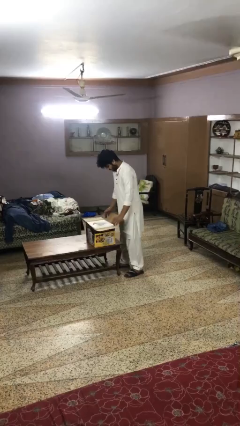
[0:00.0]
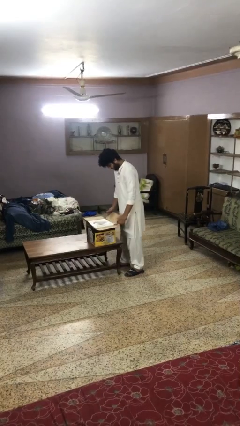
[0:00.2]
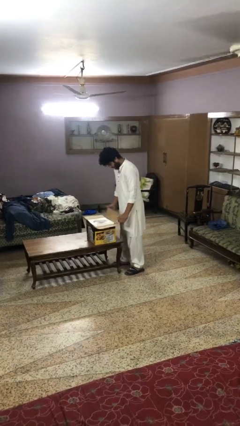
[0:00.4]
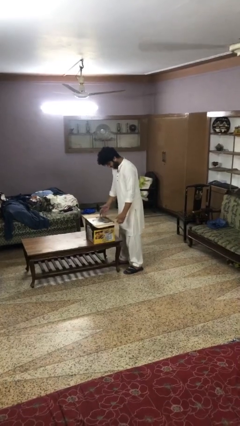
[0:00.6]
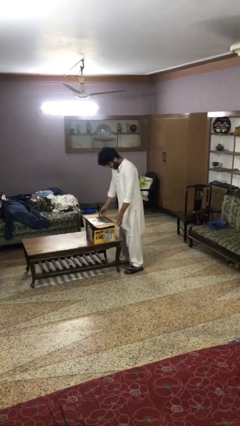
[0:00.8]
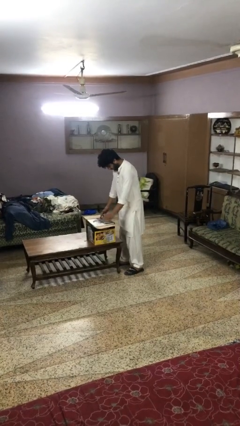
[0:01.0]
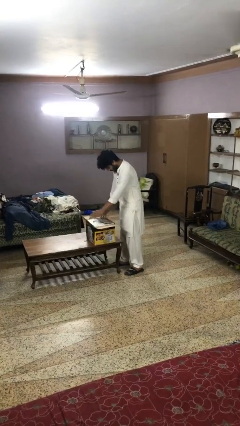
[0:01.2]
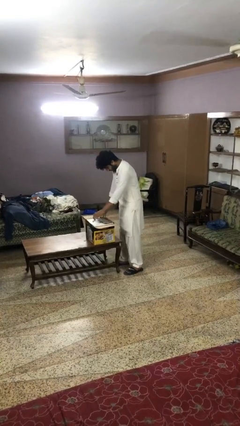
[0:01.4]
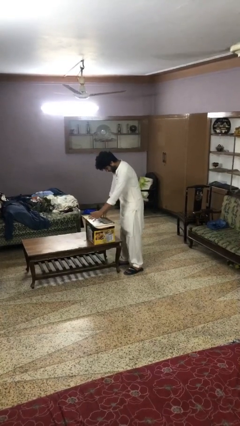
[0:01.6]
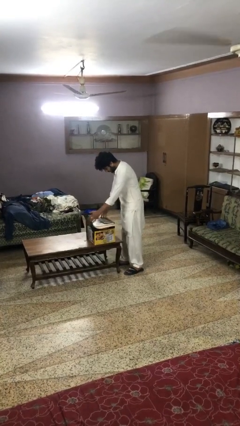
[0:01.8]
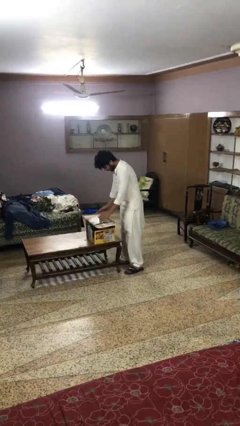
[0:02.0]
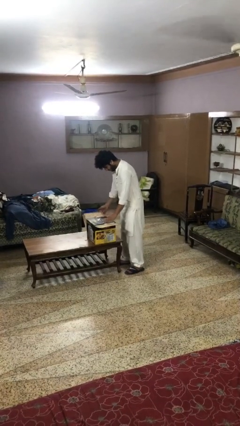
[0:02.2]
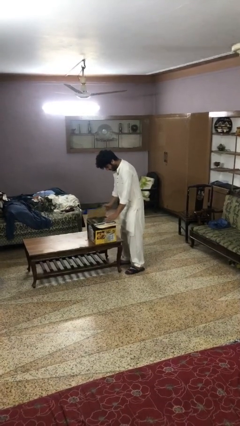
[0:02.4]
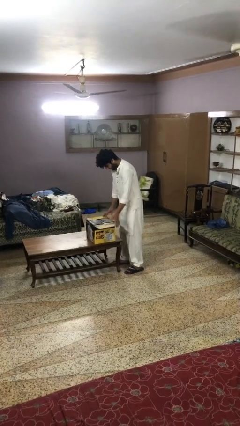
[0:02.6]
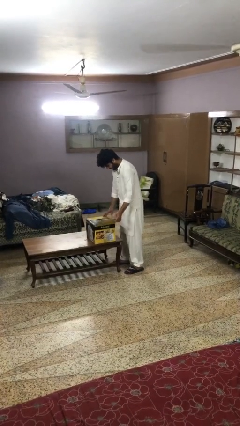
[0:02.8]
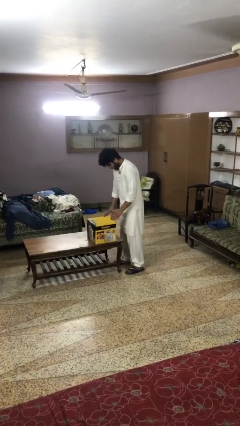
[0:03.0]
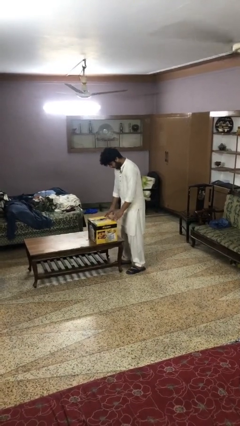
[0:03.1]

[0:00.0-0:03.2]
person closes box

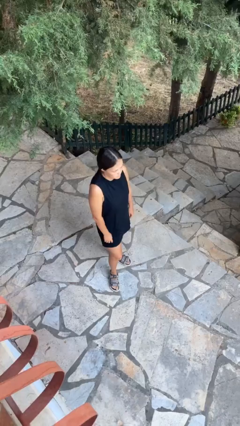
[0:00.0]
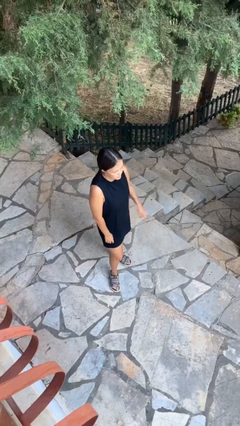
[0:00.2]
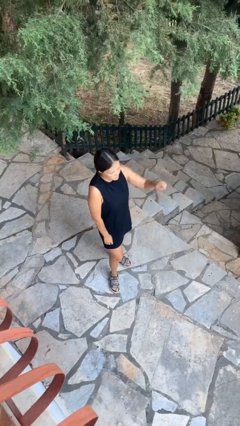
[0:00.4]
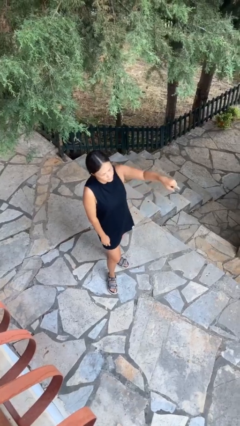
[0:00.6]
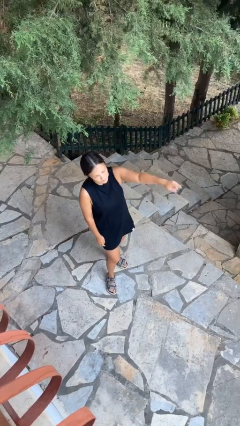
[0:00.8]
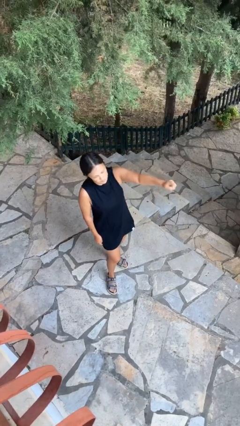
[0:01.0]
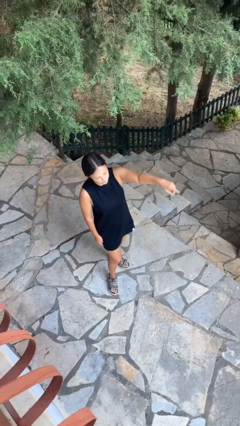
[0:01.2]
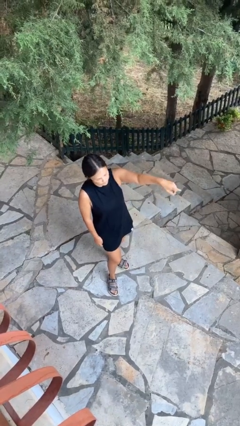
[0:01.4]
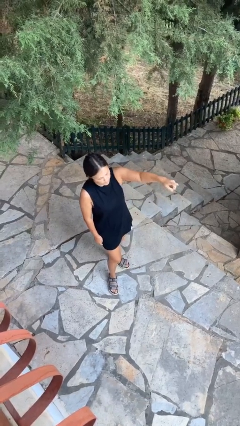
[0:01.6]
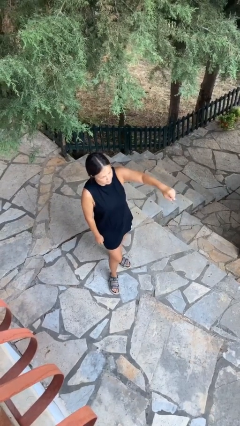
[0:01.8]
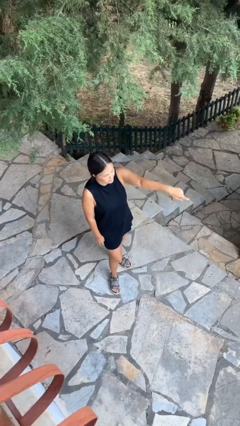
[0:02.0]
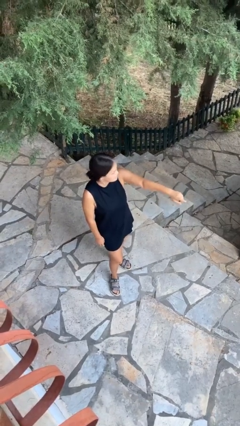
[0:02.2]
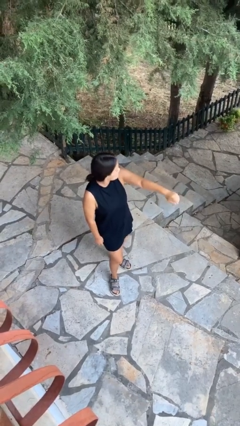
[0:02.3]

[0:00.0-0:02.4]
person points at person

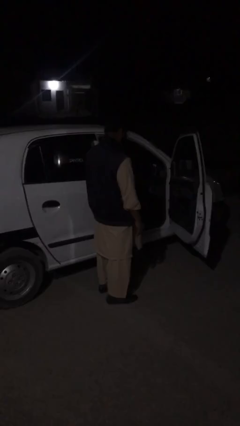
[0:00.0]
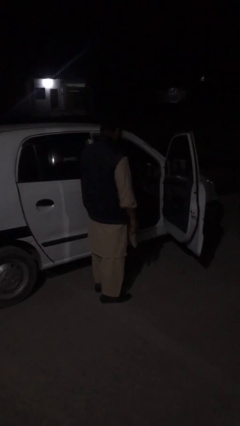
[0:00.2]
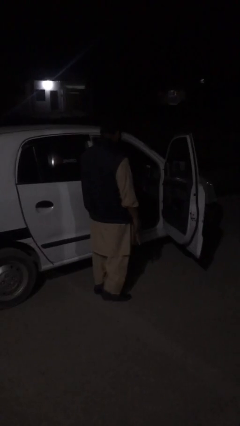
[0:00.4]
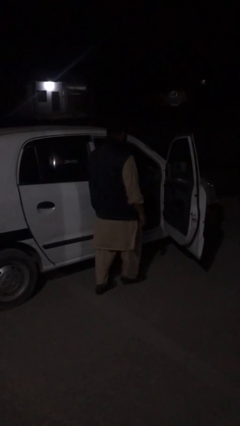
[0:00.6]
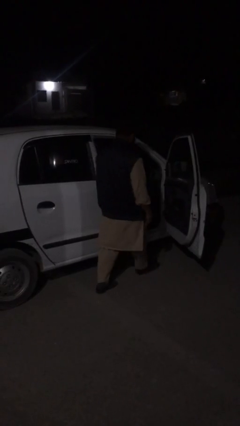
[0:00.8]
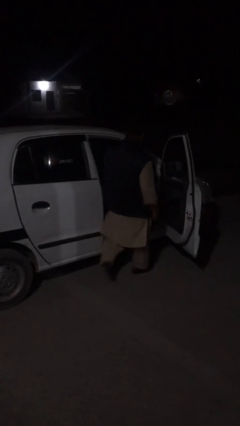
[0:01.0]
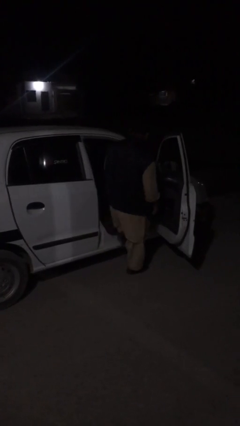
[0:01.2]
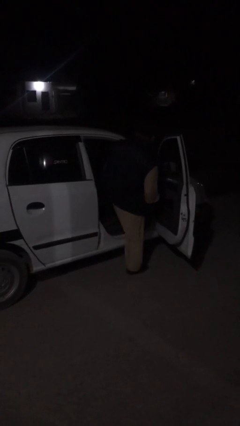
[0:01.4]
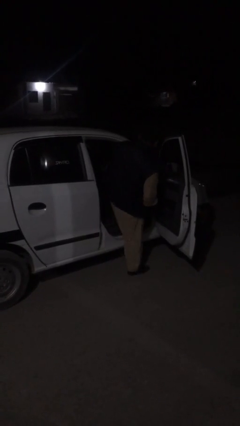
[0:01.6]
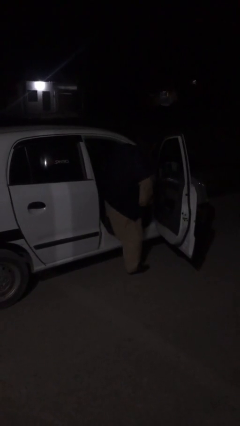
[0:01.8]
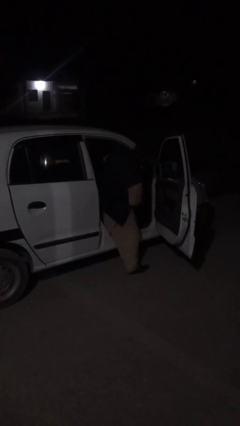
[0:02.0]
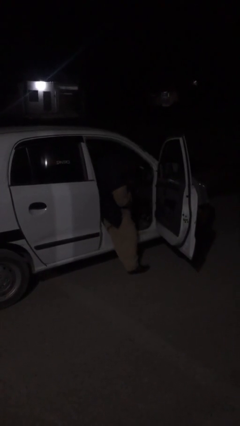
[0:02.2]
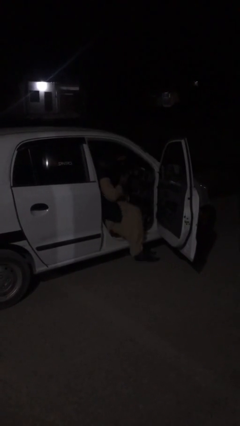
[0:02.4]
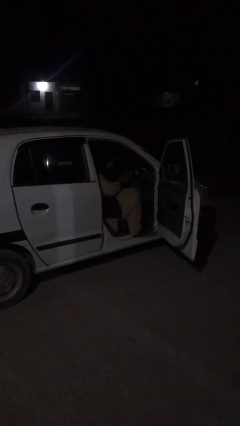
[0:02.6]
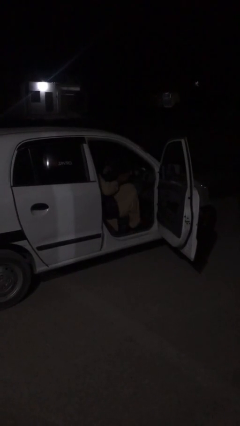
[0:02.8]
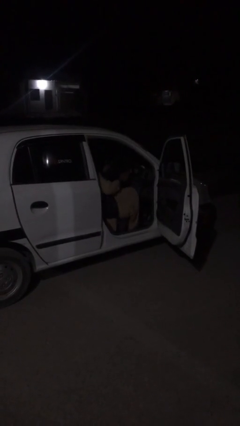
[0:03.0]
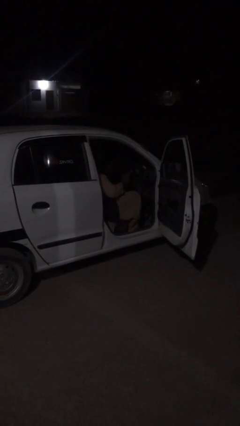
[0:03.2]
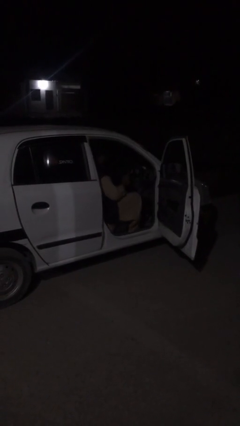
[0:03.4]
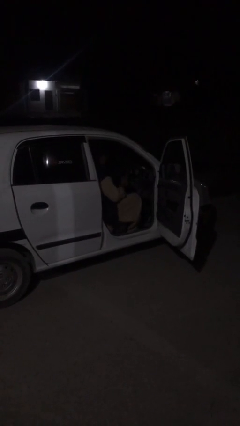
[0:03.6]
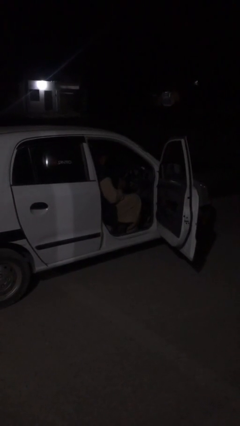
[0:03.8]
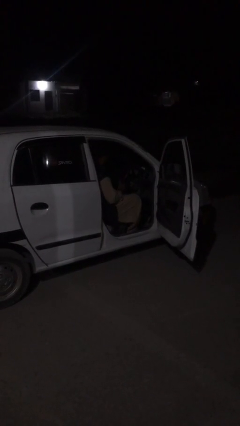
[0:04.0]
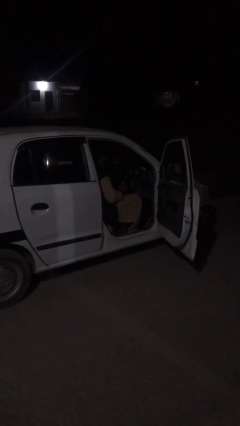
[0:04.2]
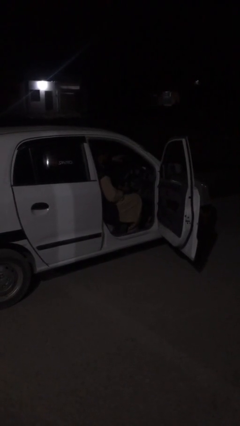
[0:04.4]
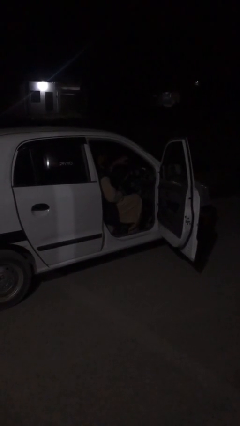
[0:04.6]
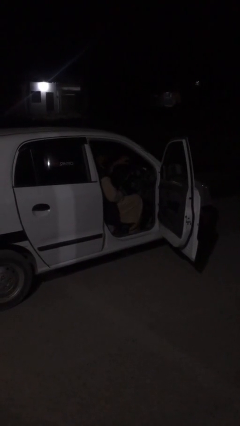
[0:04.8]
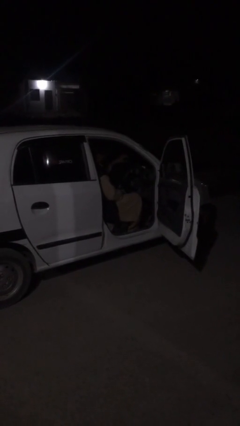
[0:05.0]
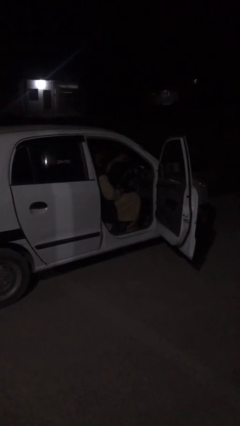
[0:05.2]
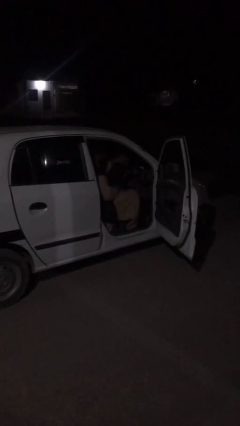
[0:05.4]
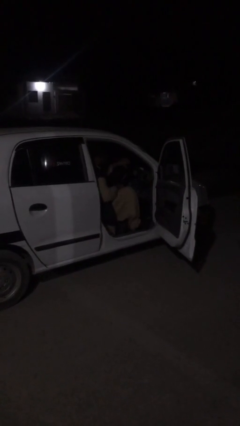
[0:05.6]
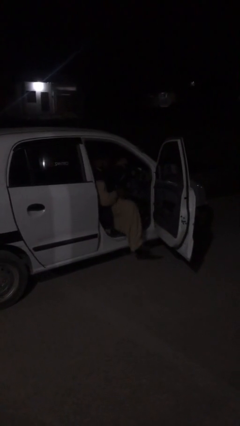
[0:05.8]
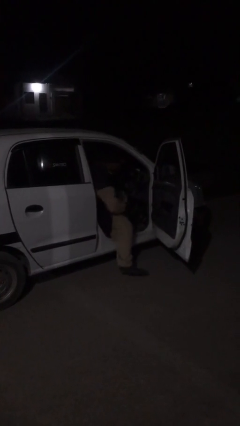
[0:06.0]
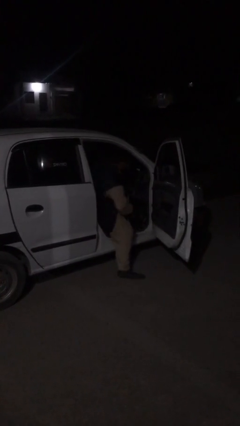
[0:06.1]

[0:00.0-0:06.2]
person enters car

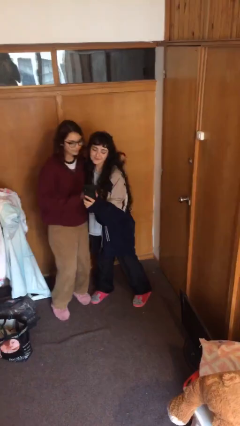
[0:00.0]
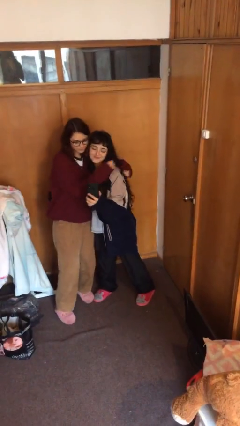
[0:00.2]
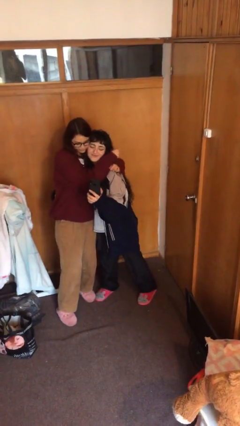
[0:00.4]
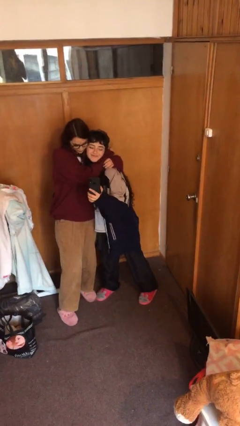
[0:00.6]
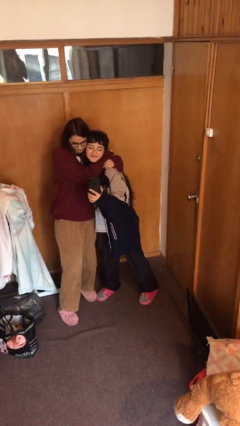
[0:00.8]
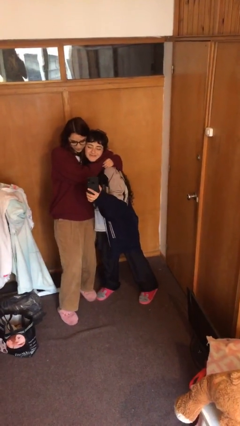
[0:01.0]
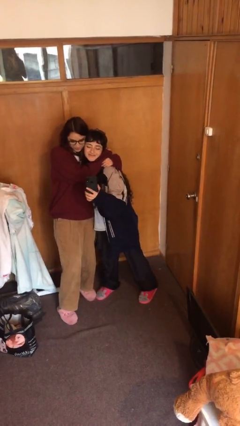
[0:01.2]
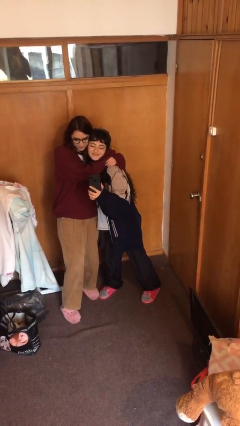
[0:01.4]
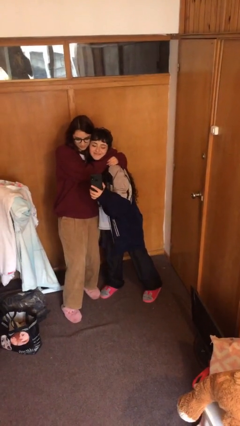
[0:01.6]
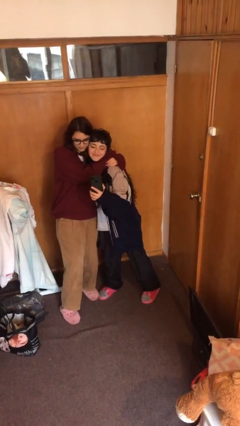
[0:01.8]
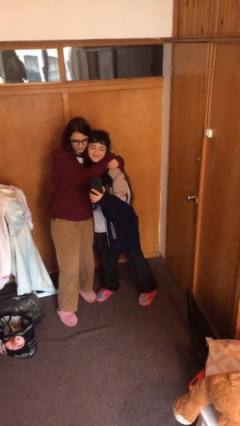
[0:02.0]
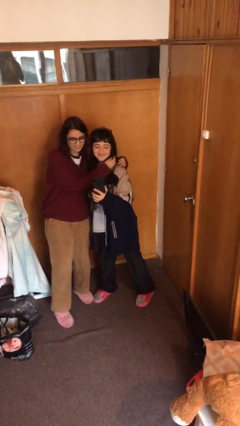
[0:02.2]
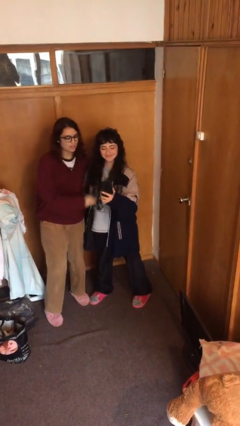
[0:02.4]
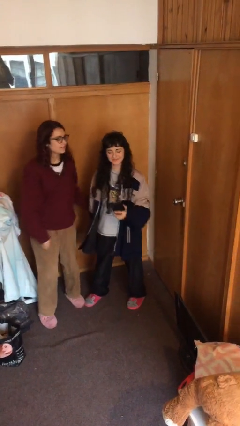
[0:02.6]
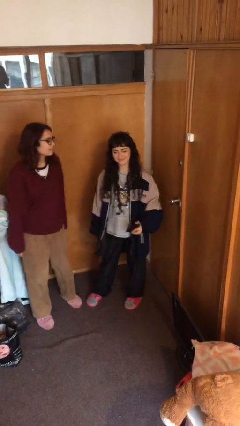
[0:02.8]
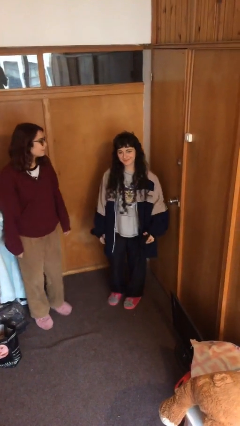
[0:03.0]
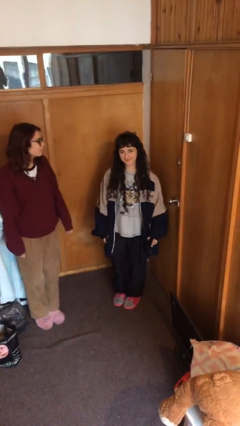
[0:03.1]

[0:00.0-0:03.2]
person takes selfie with person

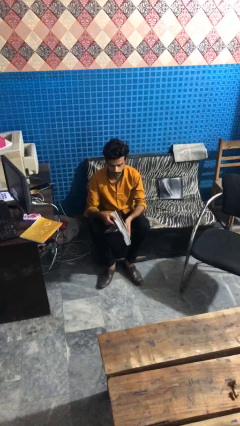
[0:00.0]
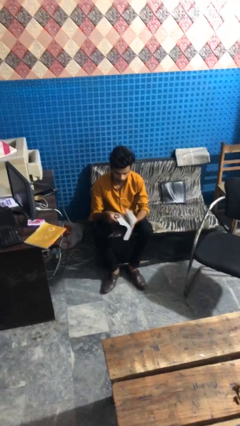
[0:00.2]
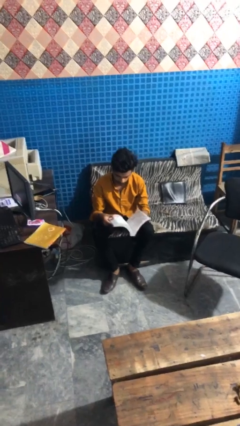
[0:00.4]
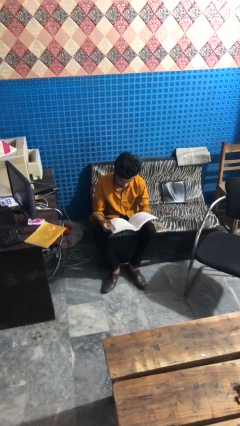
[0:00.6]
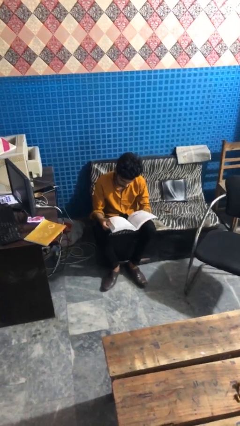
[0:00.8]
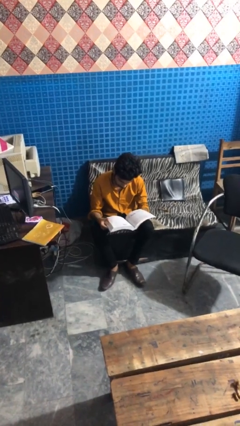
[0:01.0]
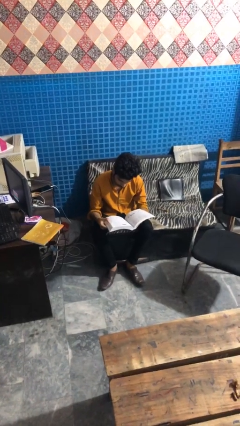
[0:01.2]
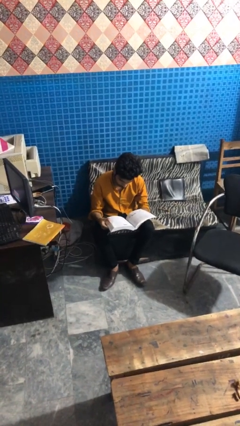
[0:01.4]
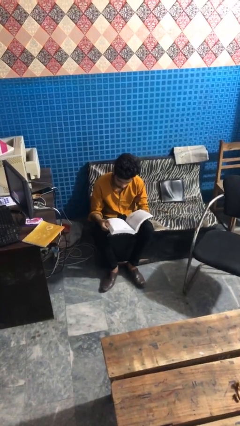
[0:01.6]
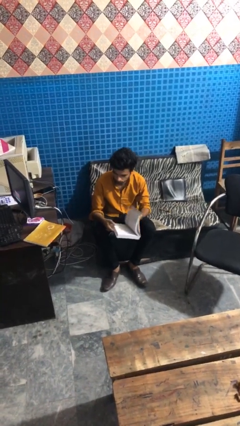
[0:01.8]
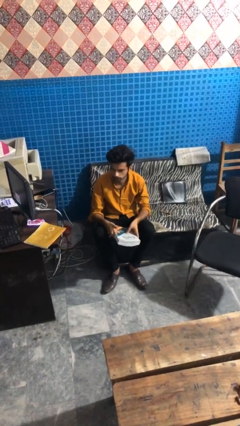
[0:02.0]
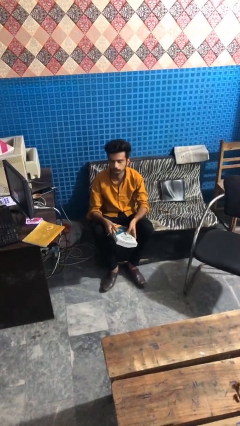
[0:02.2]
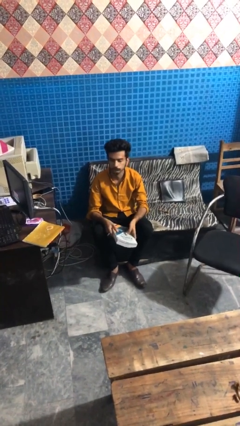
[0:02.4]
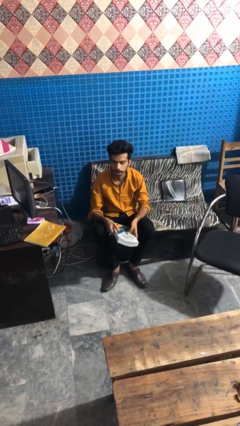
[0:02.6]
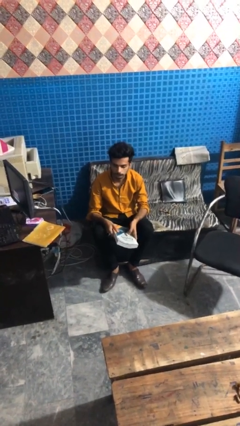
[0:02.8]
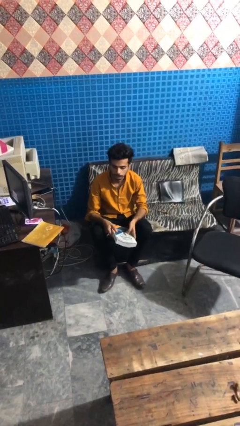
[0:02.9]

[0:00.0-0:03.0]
person reads book
